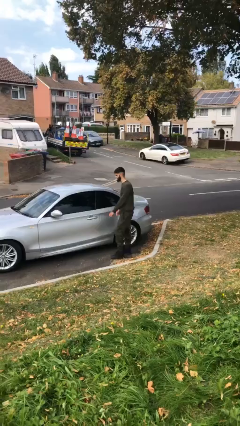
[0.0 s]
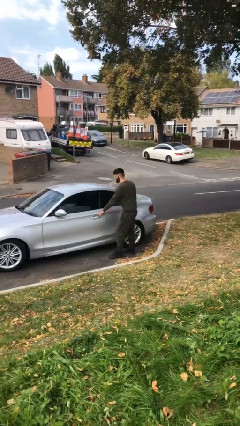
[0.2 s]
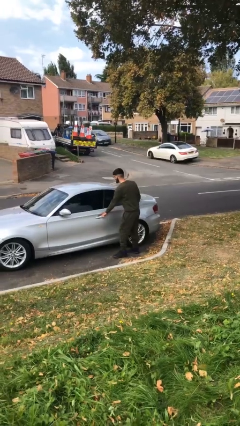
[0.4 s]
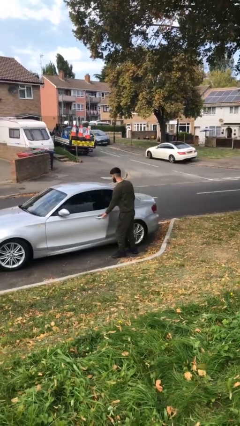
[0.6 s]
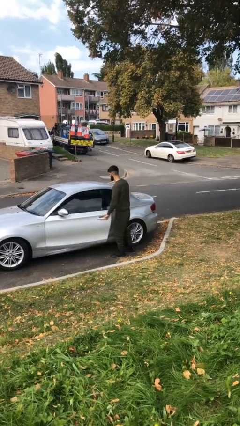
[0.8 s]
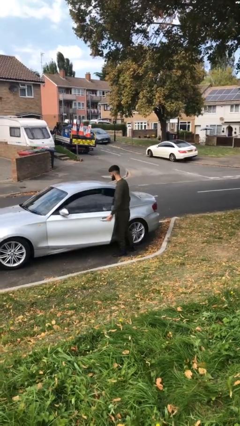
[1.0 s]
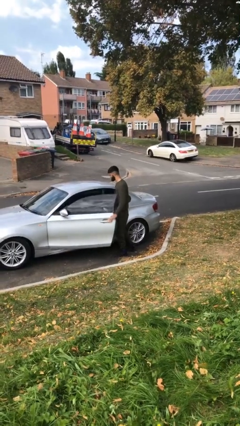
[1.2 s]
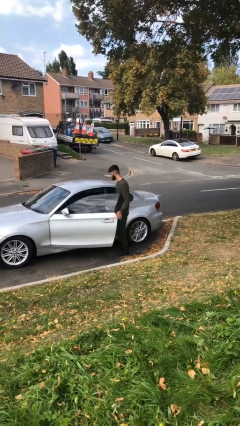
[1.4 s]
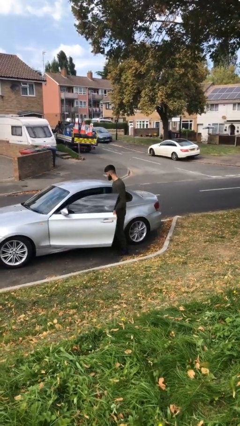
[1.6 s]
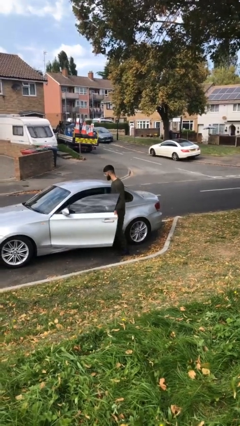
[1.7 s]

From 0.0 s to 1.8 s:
person opens car door

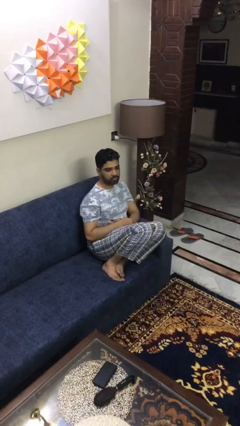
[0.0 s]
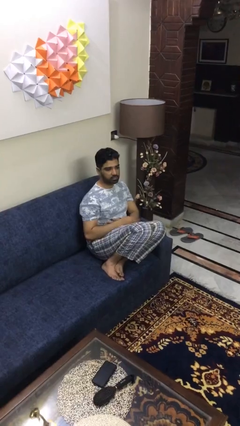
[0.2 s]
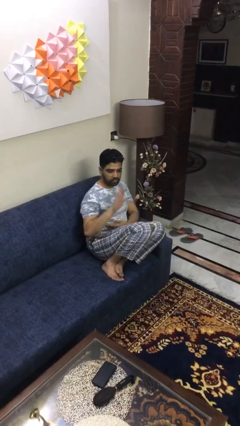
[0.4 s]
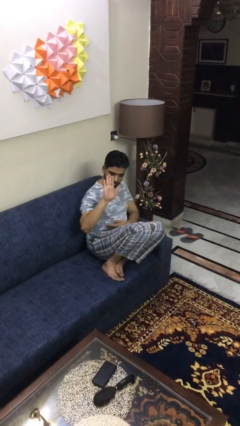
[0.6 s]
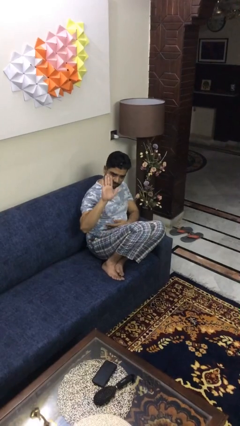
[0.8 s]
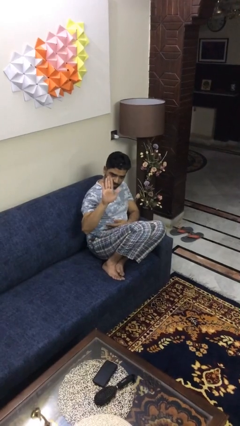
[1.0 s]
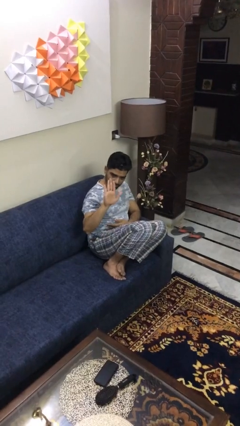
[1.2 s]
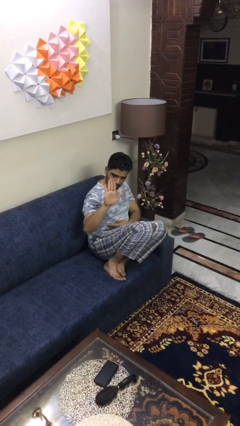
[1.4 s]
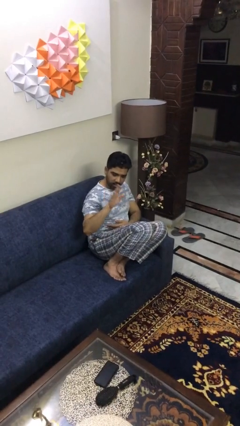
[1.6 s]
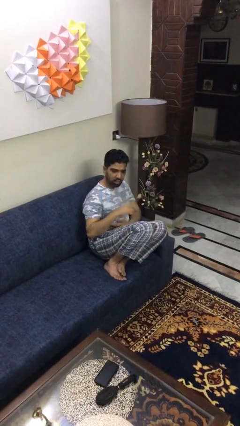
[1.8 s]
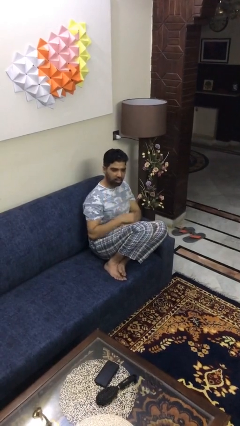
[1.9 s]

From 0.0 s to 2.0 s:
person gestures stop

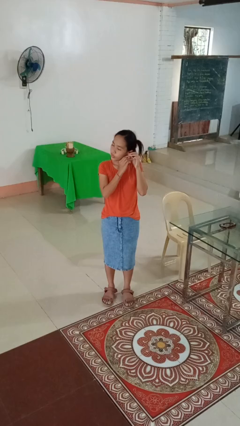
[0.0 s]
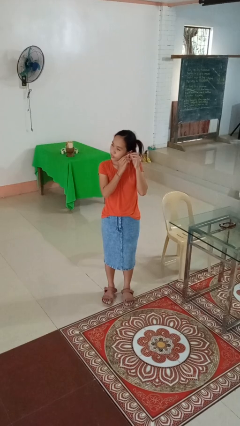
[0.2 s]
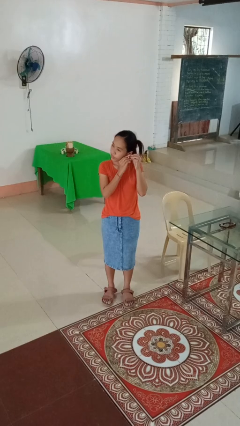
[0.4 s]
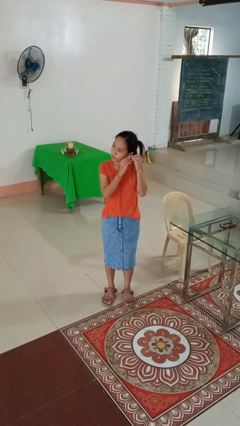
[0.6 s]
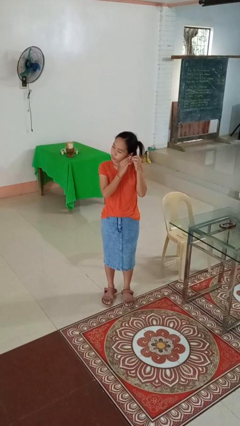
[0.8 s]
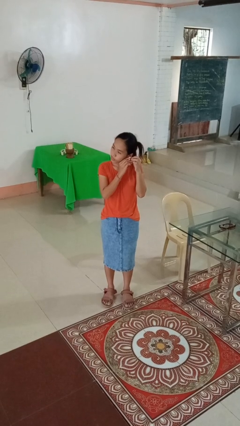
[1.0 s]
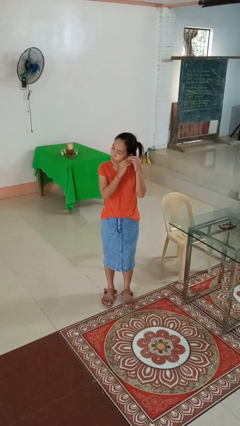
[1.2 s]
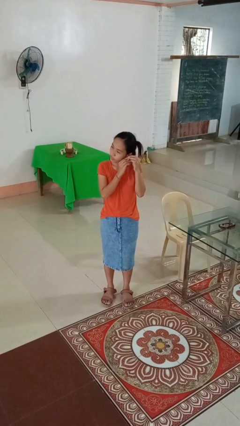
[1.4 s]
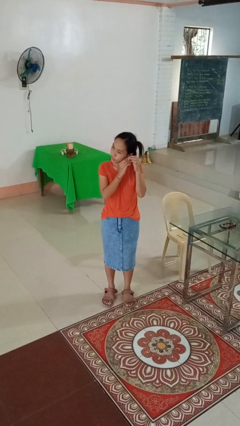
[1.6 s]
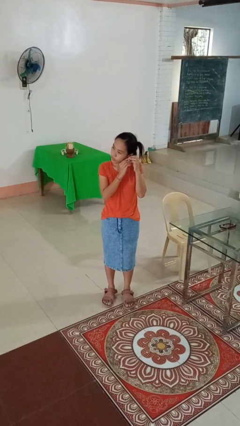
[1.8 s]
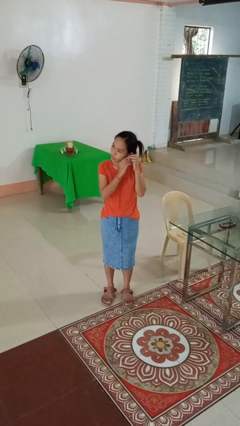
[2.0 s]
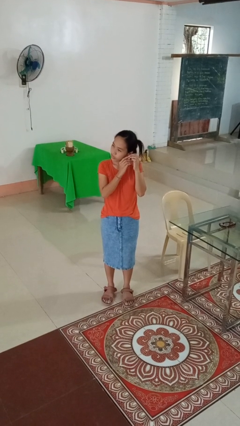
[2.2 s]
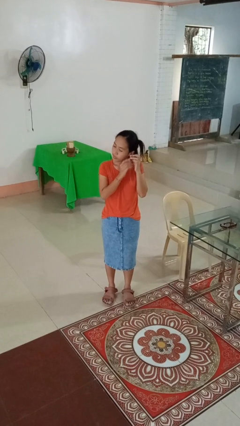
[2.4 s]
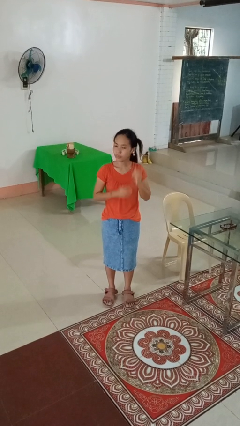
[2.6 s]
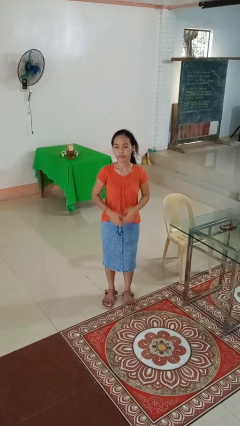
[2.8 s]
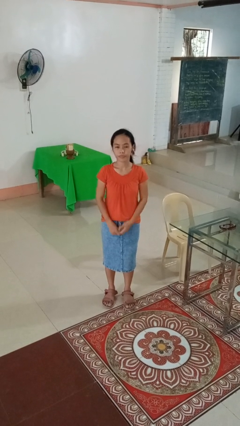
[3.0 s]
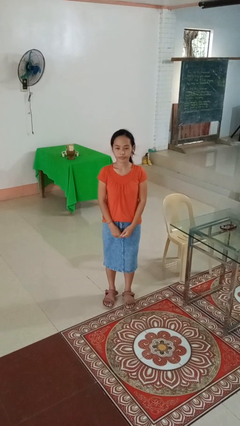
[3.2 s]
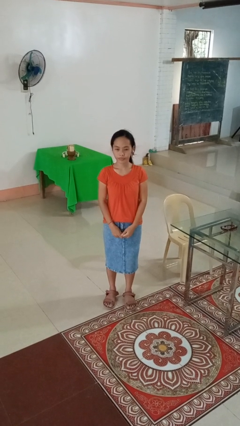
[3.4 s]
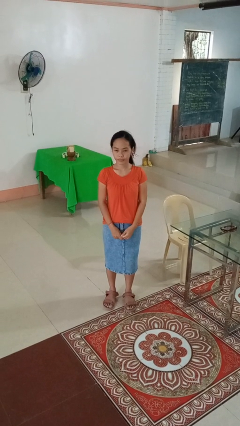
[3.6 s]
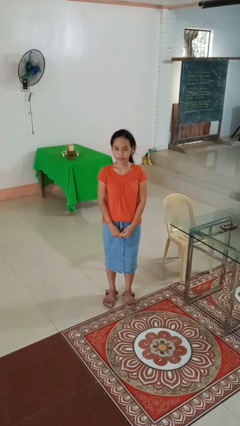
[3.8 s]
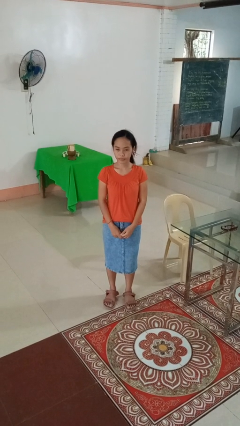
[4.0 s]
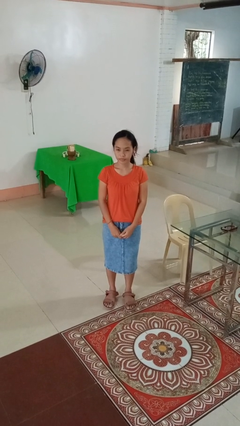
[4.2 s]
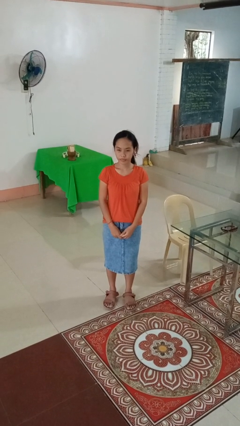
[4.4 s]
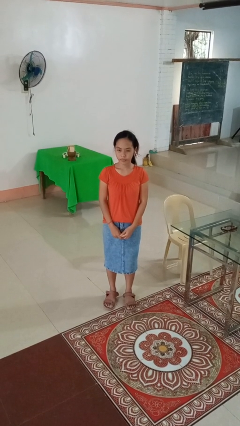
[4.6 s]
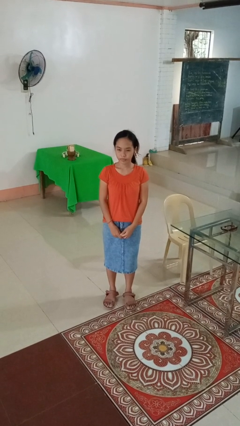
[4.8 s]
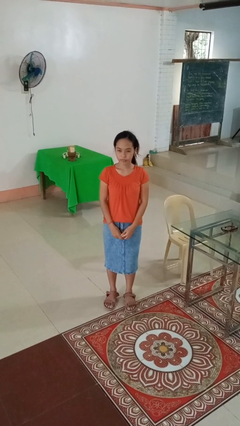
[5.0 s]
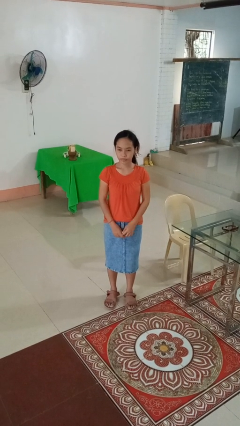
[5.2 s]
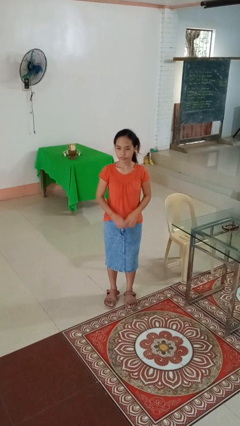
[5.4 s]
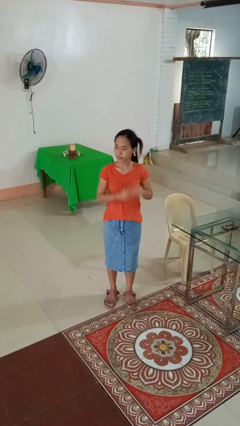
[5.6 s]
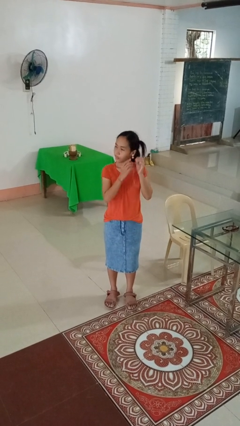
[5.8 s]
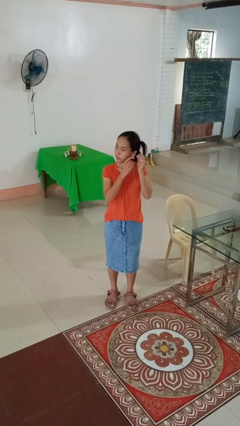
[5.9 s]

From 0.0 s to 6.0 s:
person puts on earrings

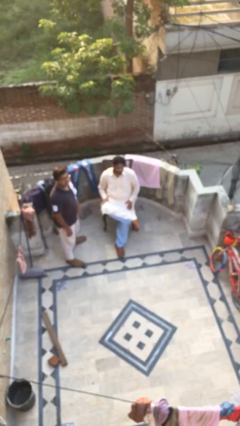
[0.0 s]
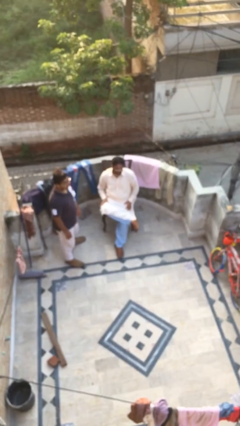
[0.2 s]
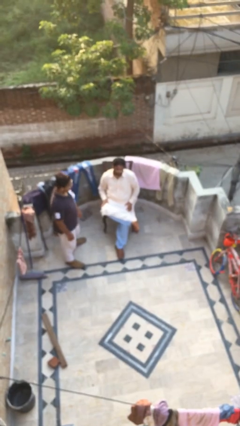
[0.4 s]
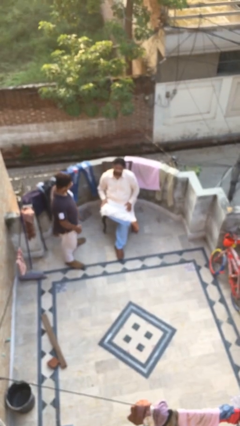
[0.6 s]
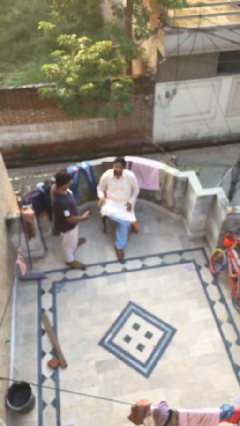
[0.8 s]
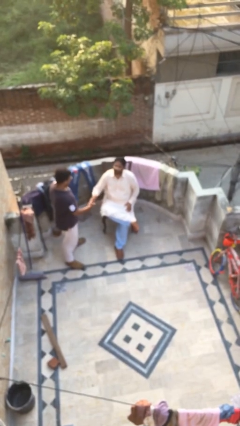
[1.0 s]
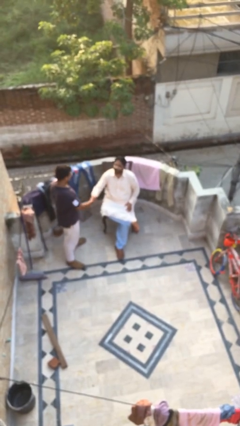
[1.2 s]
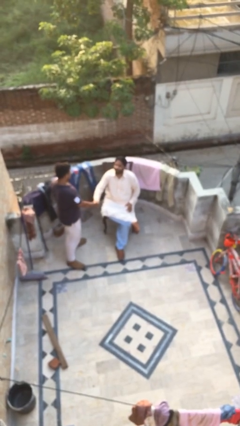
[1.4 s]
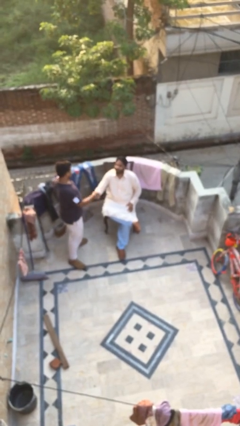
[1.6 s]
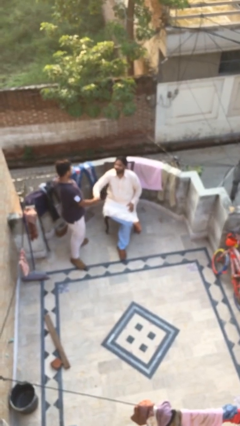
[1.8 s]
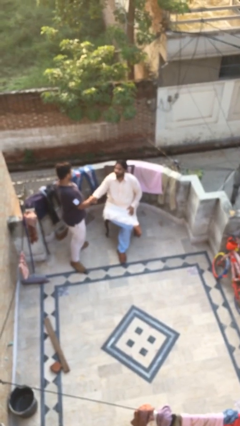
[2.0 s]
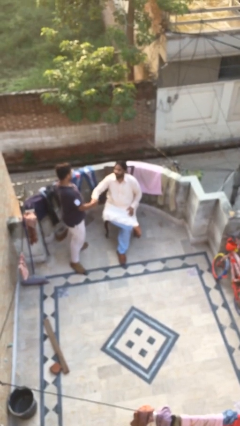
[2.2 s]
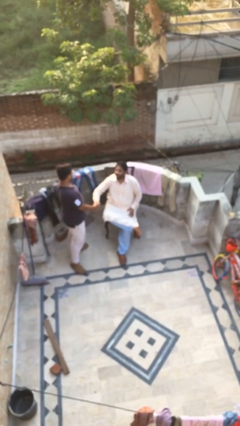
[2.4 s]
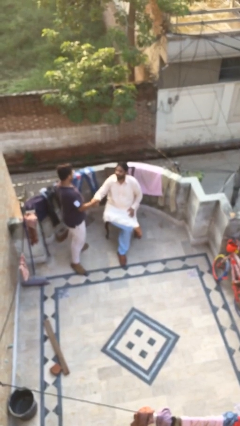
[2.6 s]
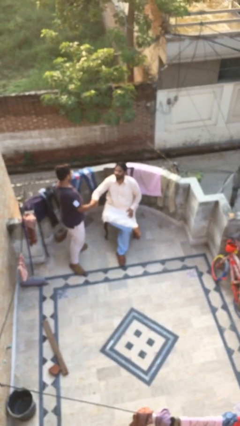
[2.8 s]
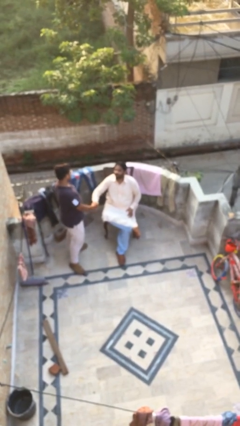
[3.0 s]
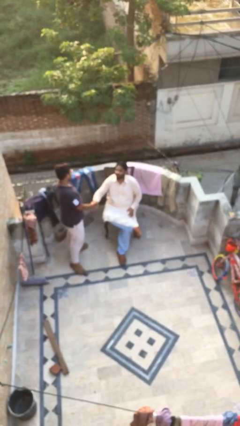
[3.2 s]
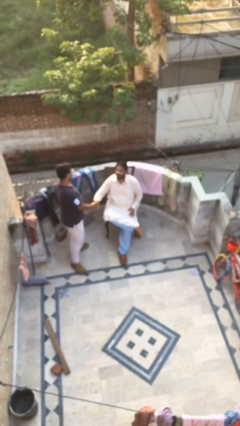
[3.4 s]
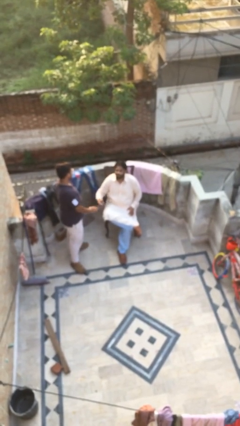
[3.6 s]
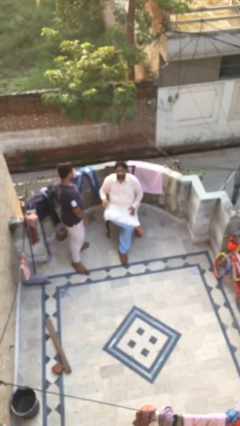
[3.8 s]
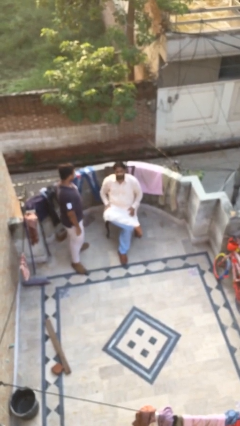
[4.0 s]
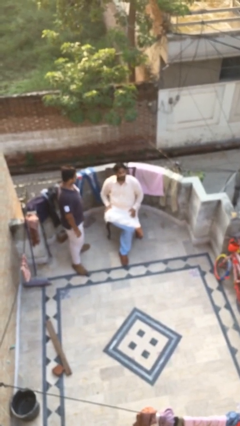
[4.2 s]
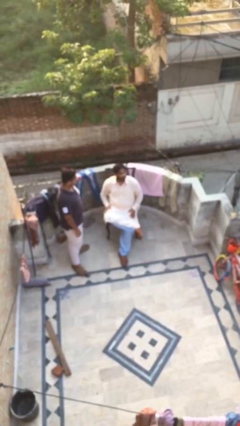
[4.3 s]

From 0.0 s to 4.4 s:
person shakes hand

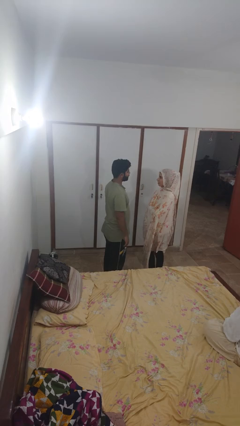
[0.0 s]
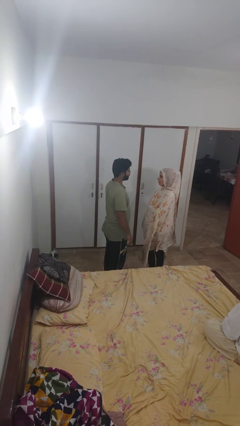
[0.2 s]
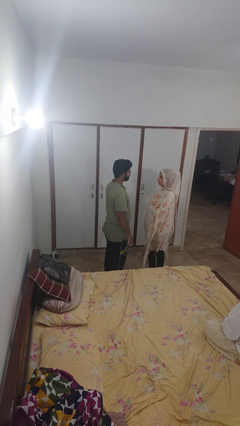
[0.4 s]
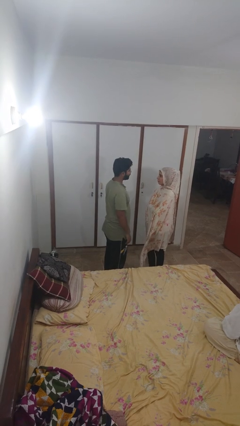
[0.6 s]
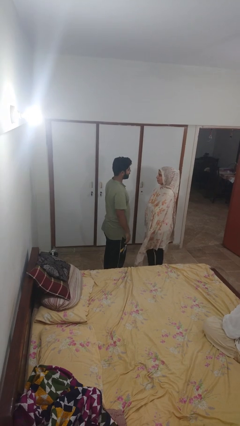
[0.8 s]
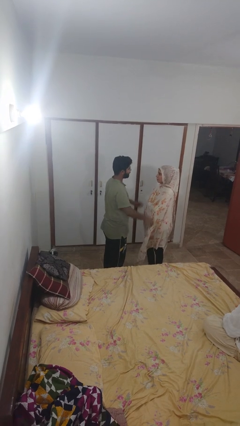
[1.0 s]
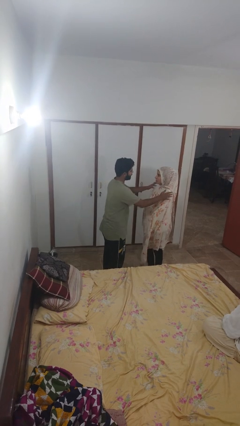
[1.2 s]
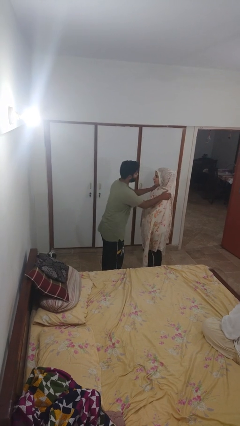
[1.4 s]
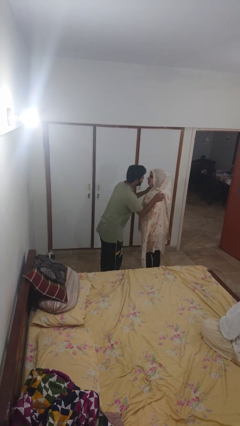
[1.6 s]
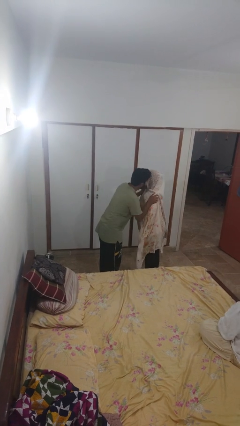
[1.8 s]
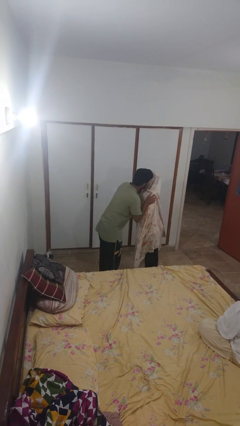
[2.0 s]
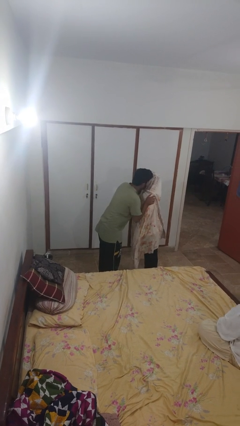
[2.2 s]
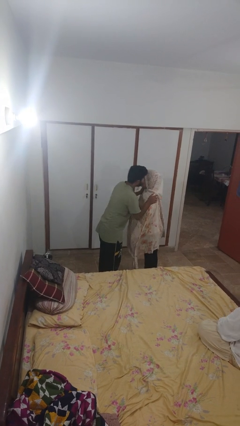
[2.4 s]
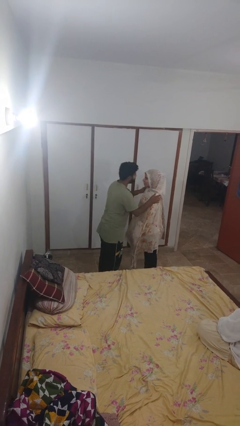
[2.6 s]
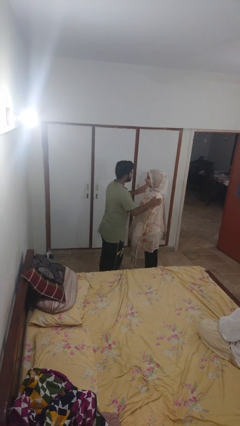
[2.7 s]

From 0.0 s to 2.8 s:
person kisses cheek of person

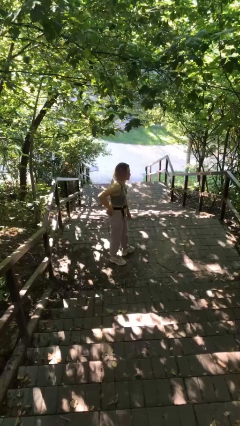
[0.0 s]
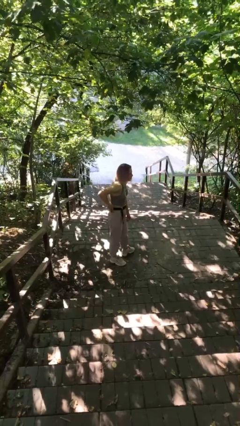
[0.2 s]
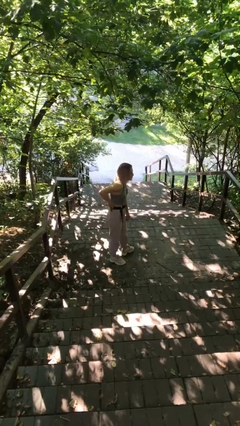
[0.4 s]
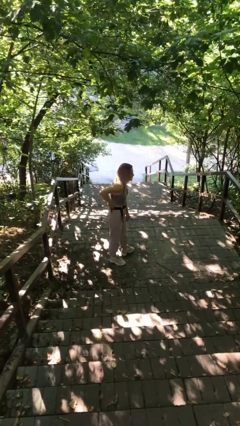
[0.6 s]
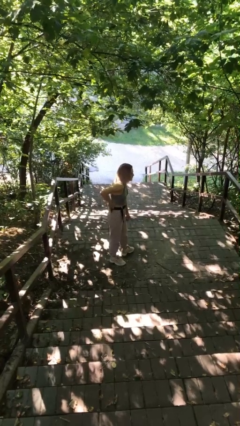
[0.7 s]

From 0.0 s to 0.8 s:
person puts phone into pocket
